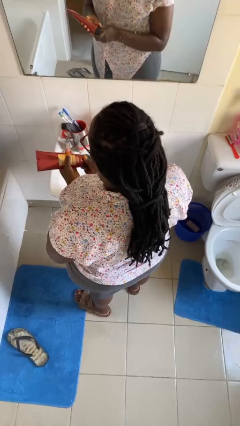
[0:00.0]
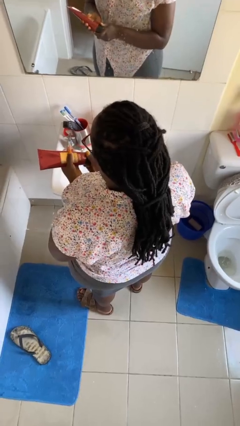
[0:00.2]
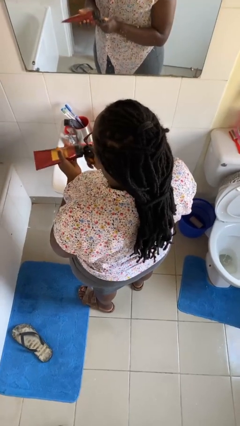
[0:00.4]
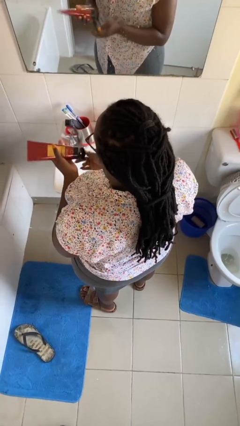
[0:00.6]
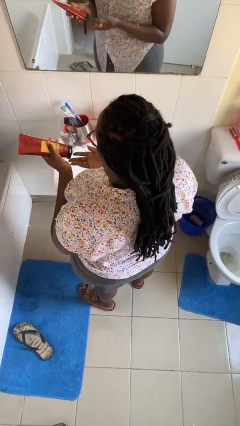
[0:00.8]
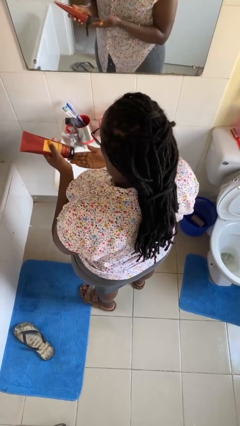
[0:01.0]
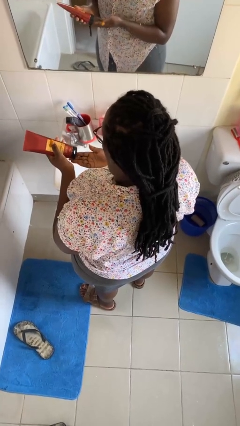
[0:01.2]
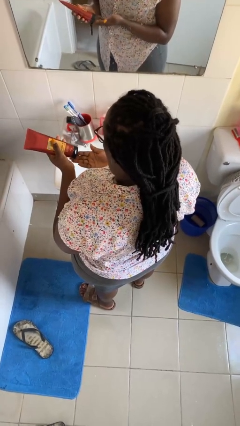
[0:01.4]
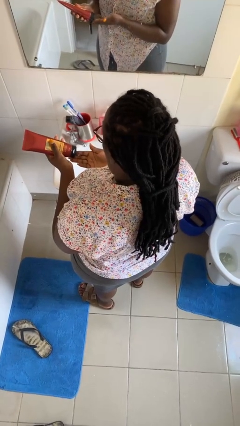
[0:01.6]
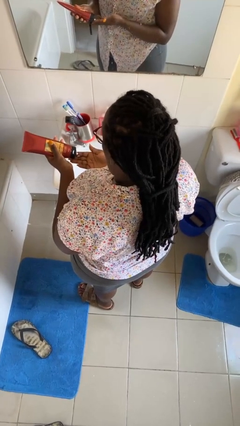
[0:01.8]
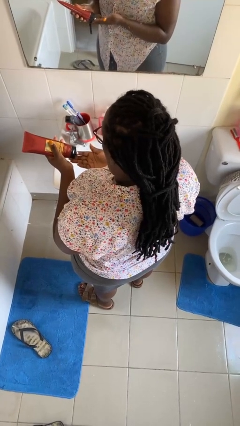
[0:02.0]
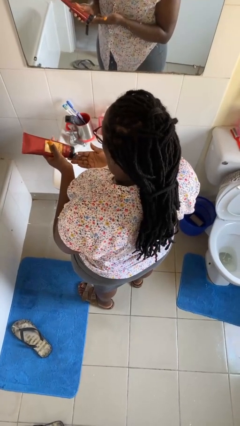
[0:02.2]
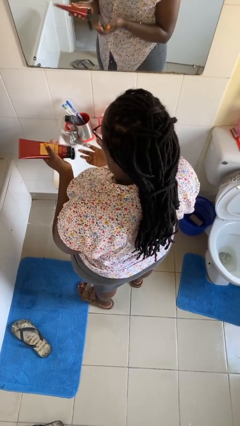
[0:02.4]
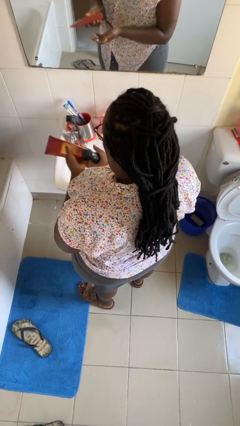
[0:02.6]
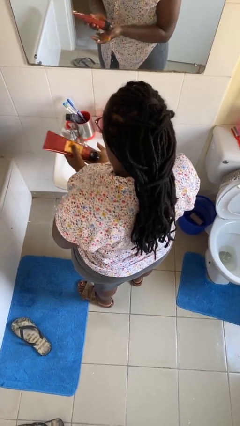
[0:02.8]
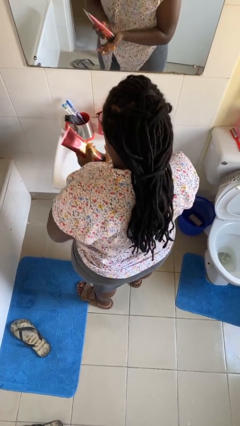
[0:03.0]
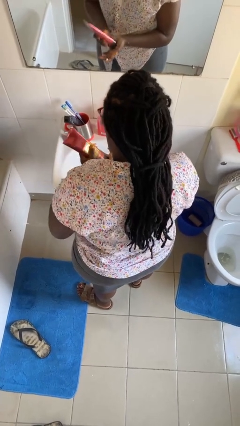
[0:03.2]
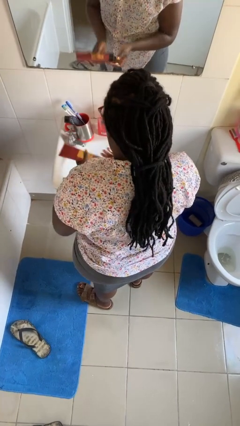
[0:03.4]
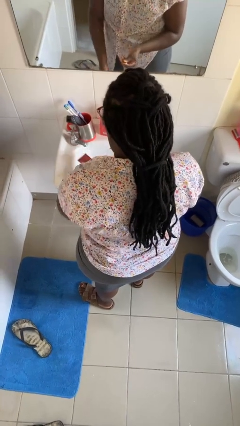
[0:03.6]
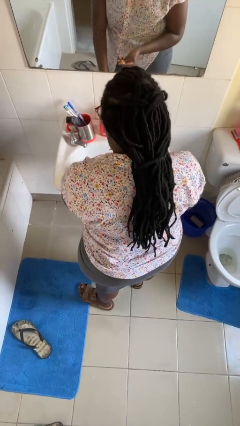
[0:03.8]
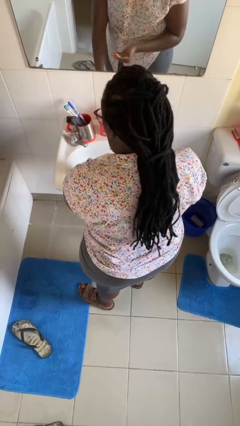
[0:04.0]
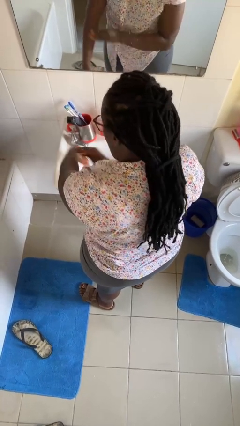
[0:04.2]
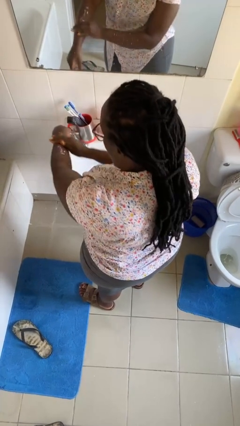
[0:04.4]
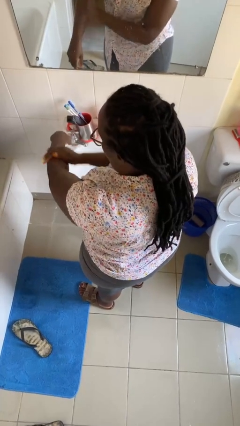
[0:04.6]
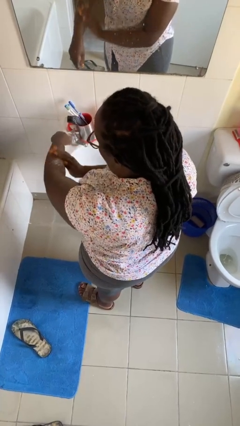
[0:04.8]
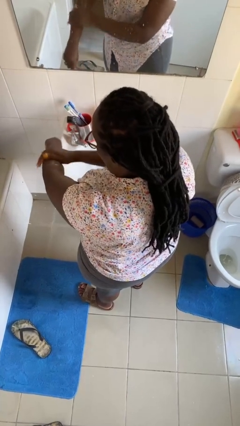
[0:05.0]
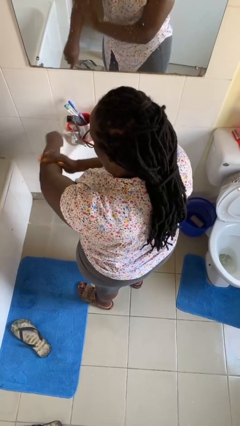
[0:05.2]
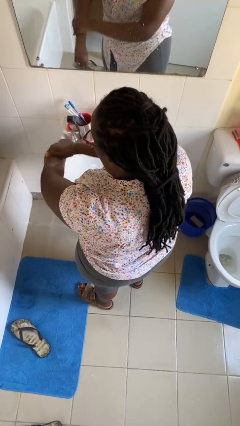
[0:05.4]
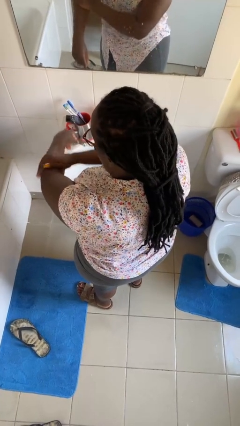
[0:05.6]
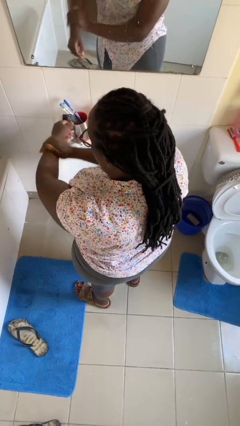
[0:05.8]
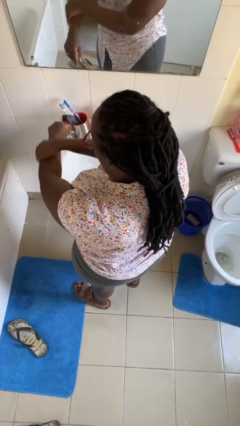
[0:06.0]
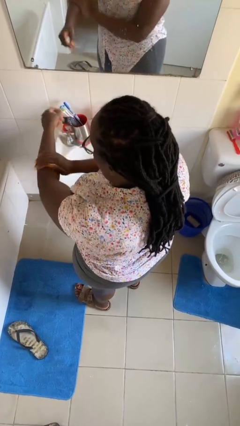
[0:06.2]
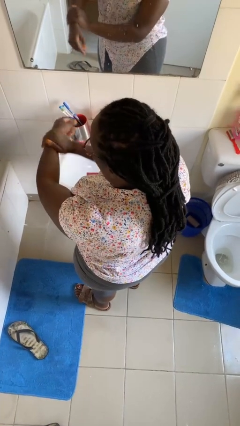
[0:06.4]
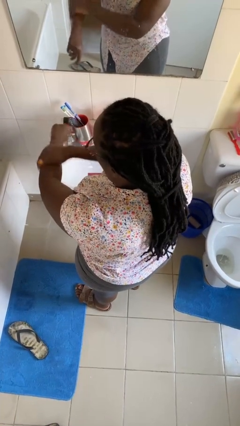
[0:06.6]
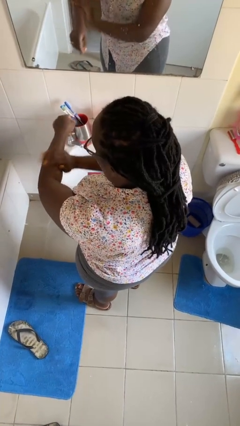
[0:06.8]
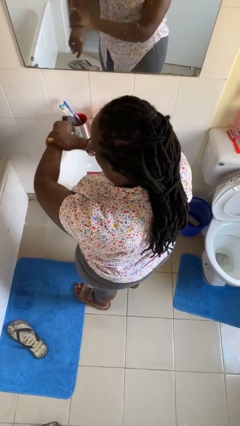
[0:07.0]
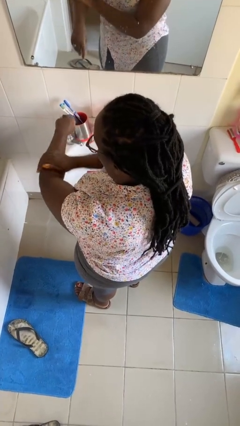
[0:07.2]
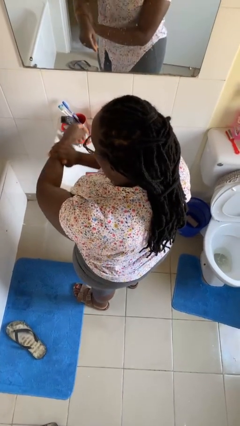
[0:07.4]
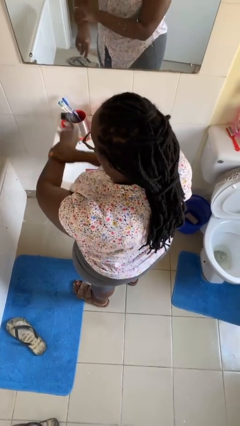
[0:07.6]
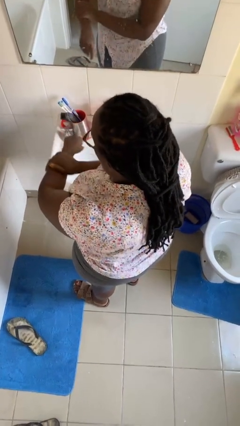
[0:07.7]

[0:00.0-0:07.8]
person applies sunscreen

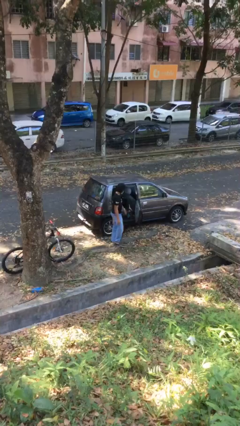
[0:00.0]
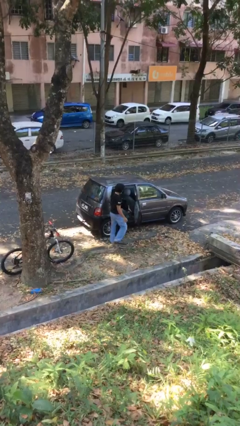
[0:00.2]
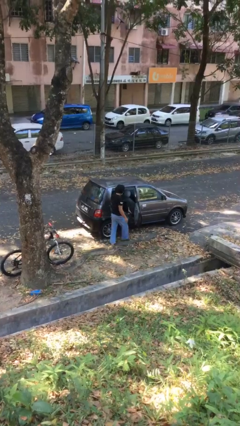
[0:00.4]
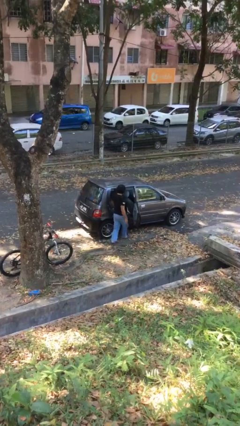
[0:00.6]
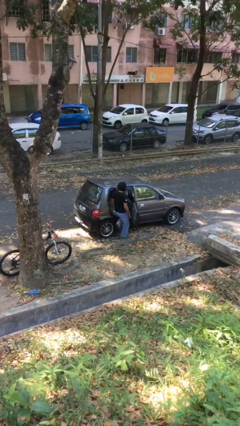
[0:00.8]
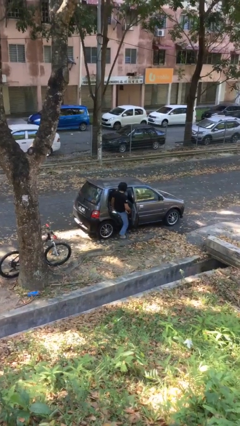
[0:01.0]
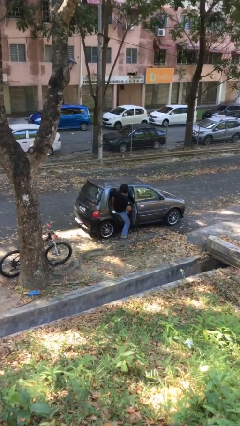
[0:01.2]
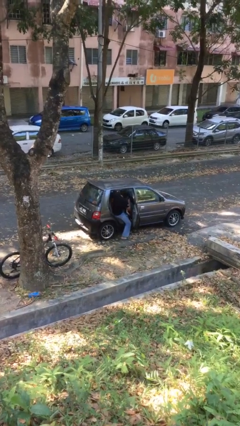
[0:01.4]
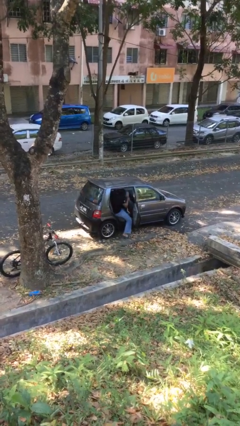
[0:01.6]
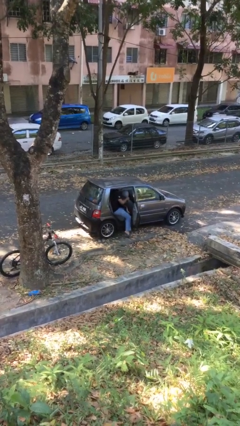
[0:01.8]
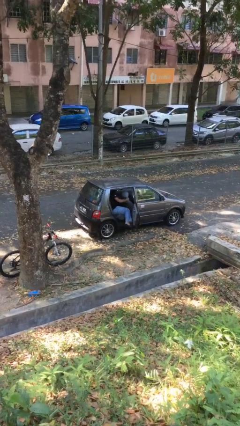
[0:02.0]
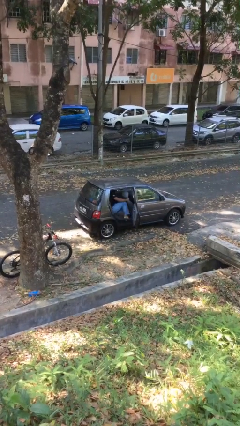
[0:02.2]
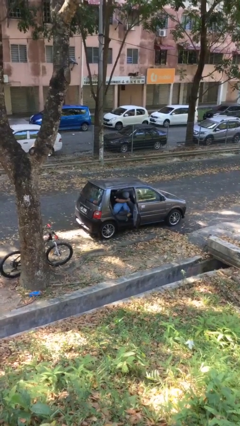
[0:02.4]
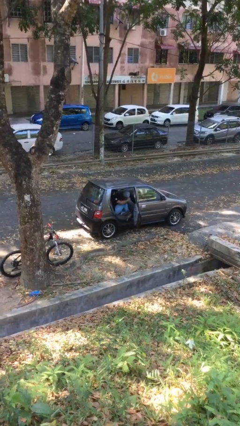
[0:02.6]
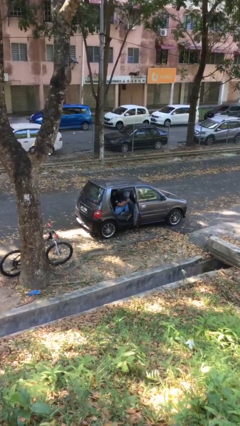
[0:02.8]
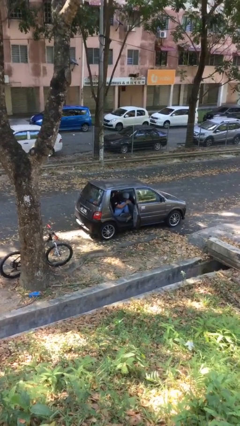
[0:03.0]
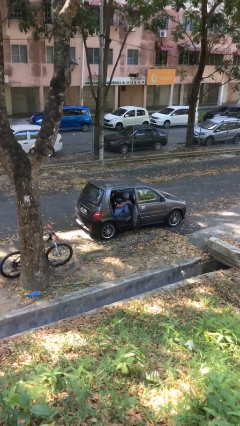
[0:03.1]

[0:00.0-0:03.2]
person enters car

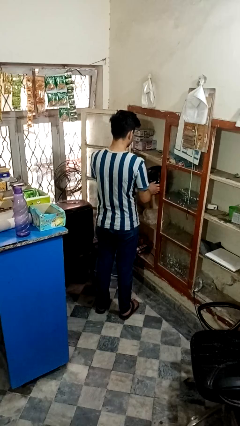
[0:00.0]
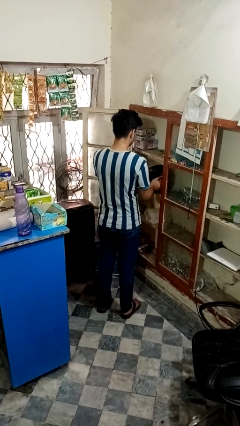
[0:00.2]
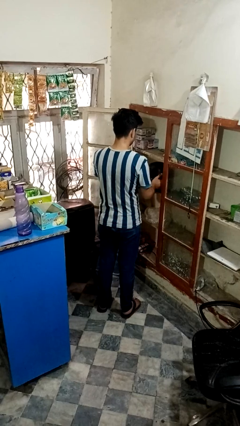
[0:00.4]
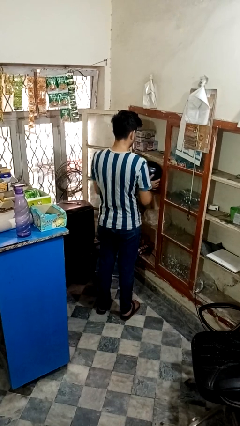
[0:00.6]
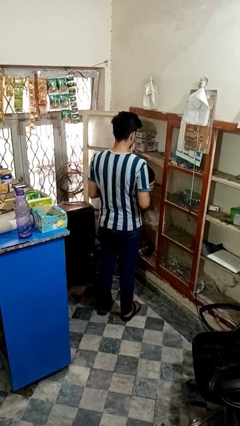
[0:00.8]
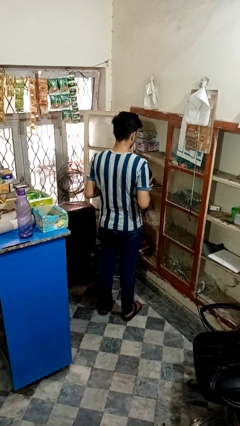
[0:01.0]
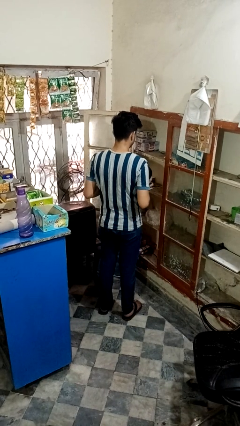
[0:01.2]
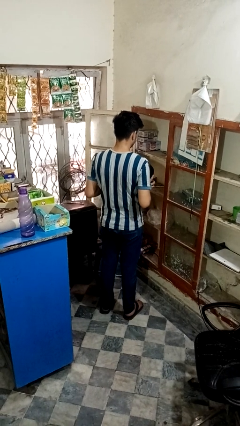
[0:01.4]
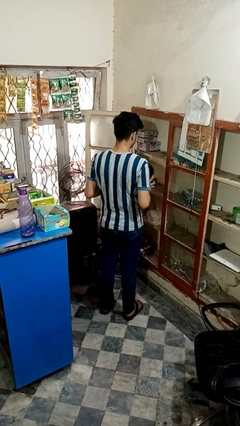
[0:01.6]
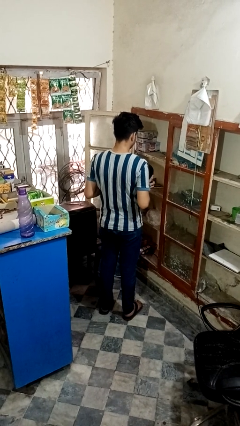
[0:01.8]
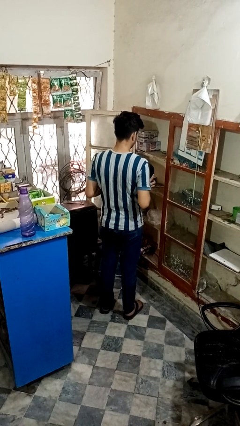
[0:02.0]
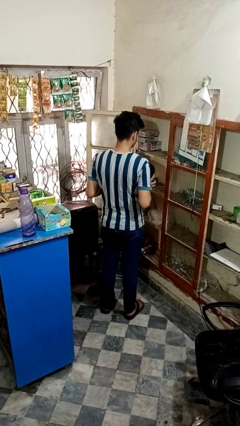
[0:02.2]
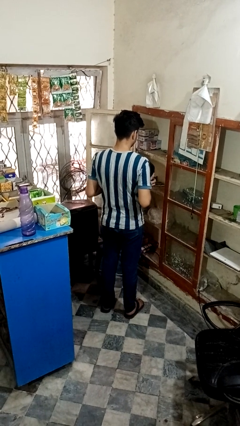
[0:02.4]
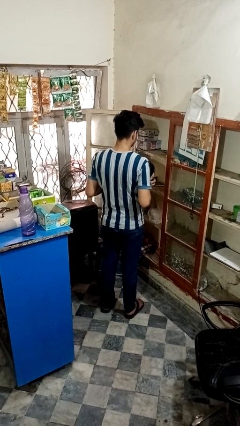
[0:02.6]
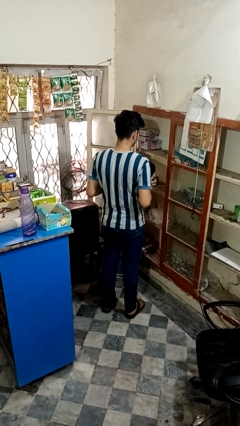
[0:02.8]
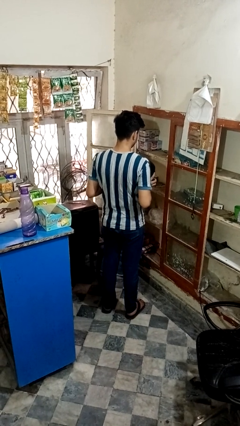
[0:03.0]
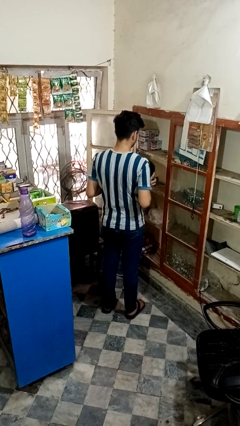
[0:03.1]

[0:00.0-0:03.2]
person picks up object from shelf

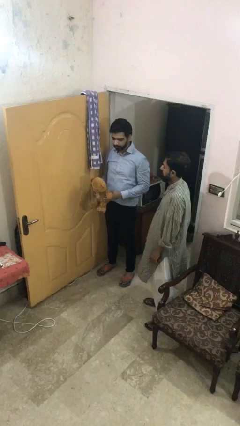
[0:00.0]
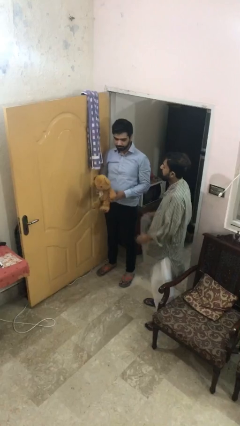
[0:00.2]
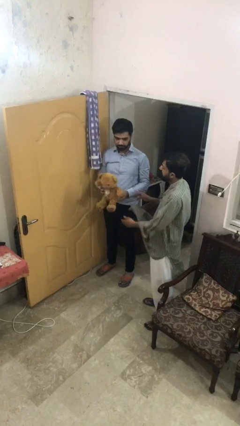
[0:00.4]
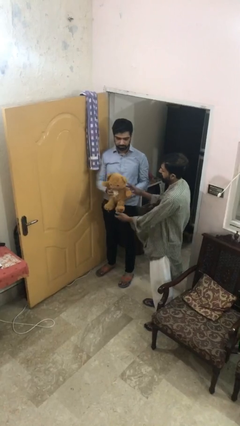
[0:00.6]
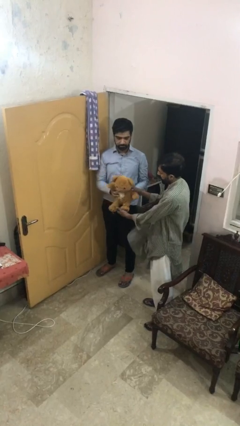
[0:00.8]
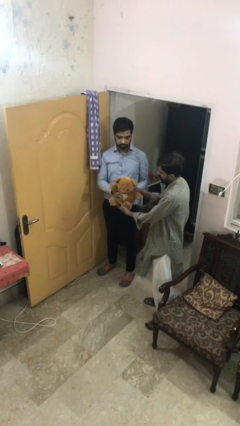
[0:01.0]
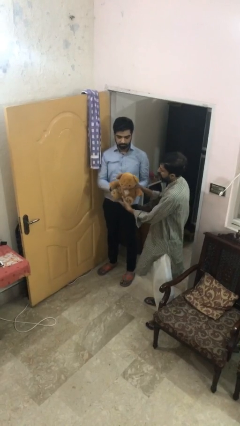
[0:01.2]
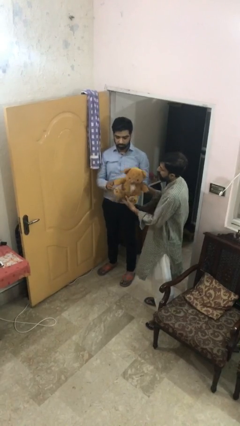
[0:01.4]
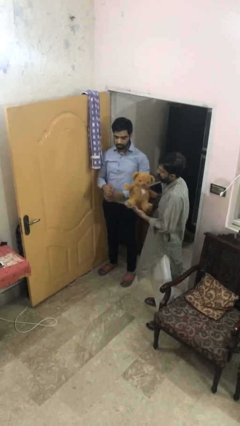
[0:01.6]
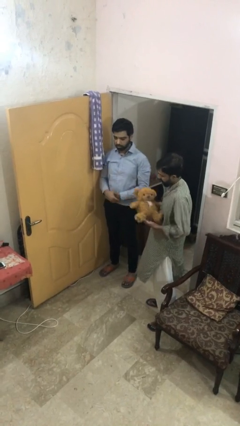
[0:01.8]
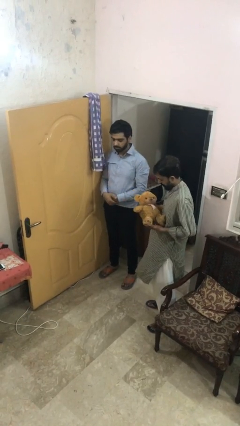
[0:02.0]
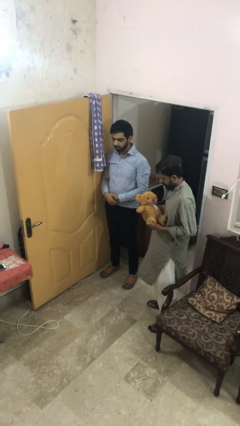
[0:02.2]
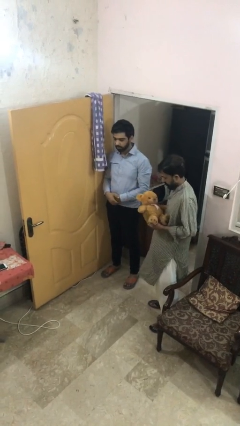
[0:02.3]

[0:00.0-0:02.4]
person transfers object to person

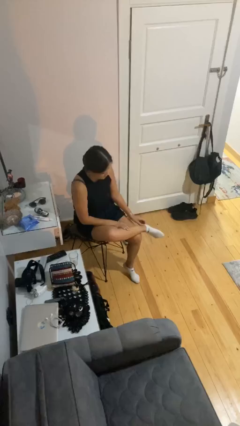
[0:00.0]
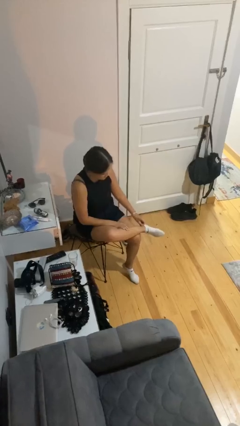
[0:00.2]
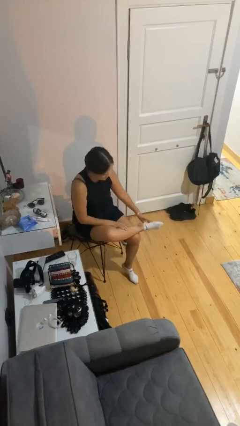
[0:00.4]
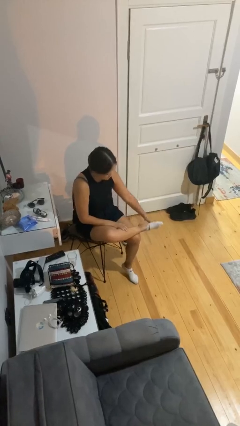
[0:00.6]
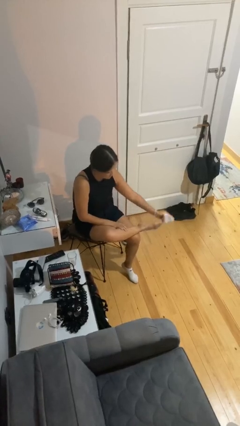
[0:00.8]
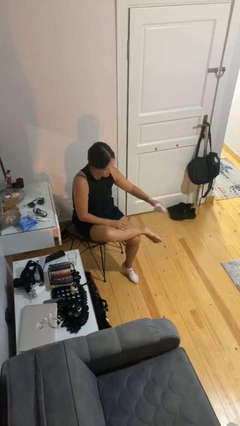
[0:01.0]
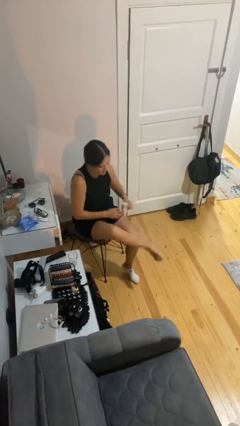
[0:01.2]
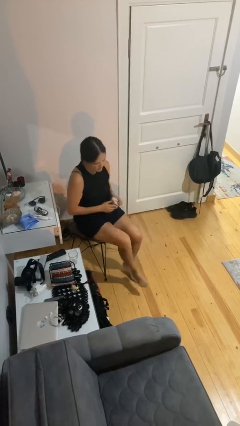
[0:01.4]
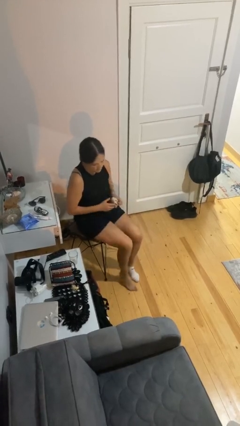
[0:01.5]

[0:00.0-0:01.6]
person takes off socks
